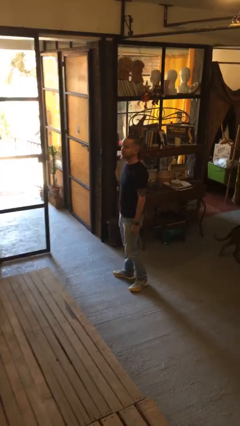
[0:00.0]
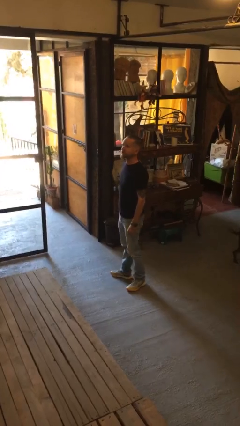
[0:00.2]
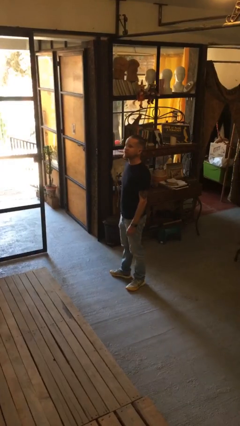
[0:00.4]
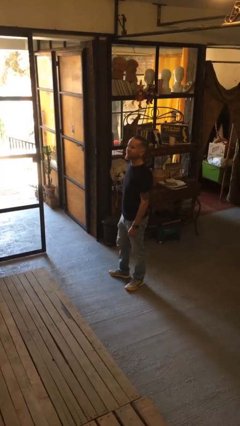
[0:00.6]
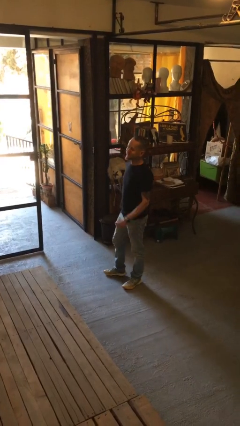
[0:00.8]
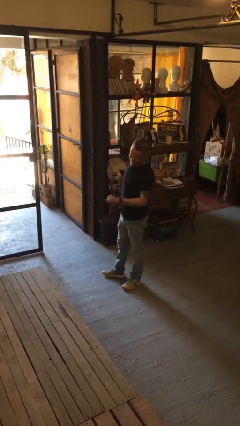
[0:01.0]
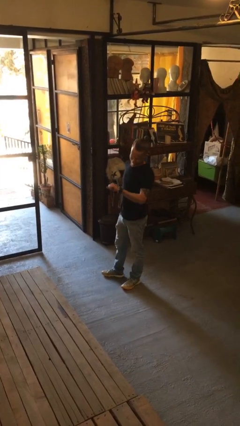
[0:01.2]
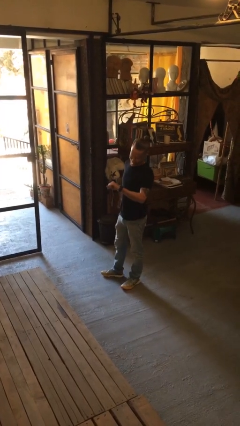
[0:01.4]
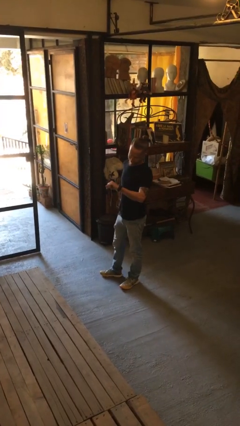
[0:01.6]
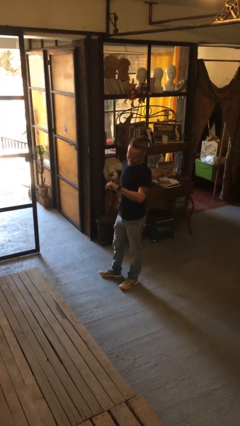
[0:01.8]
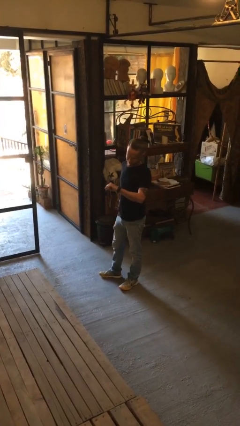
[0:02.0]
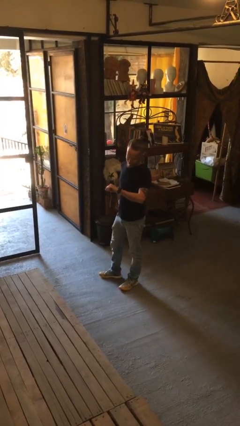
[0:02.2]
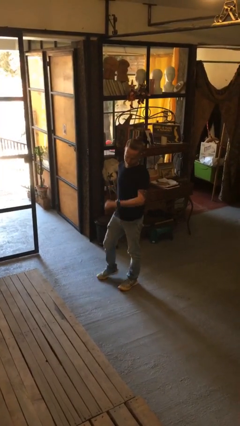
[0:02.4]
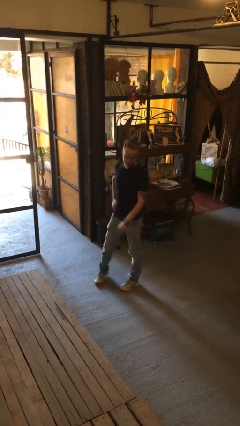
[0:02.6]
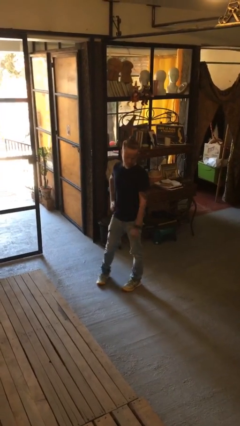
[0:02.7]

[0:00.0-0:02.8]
person looks at wristwatch

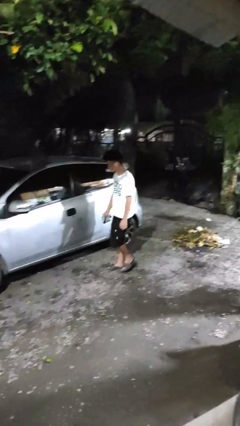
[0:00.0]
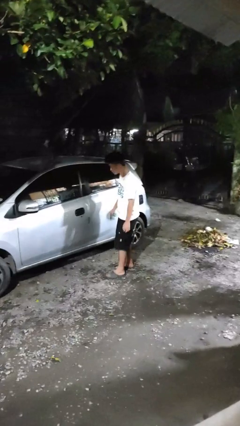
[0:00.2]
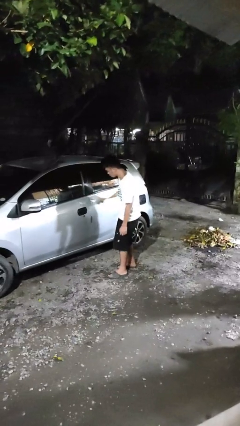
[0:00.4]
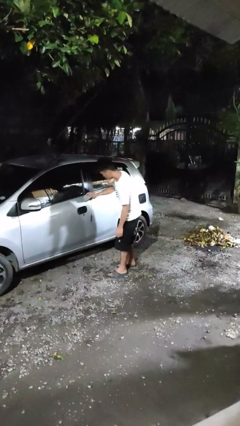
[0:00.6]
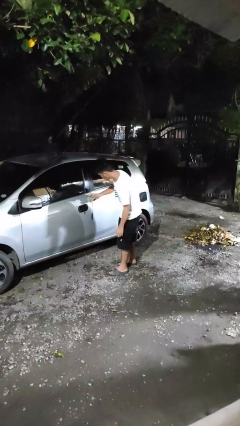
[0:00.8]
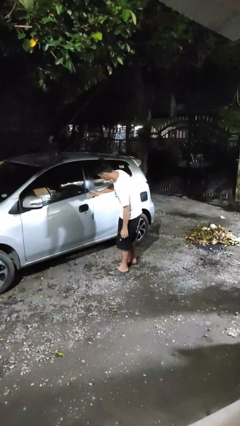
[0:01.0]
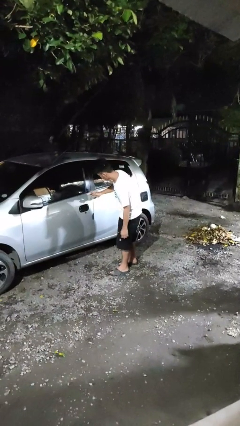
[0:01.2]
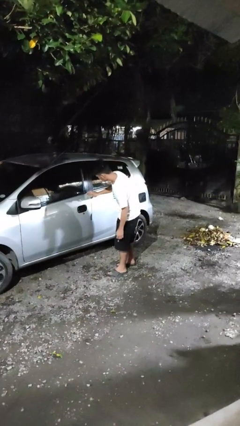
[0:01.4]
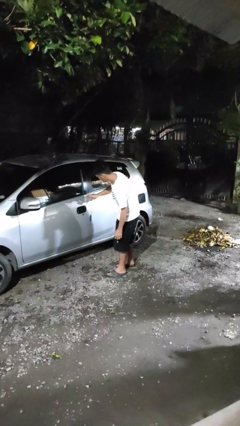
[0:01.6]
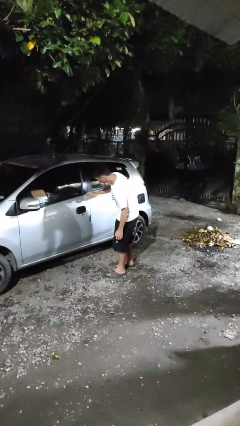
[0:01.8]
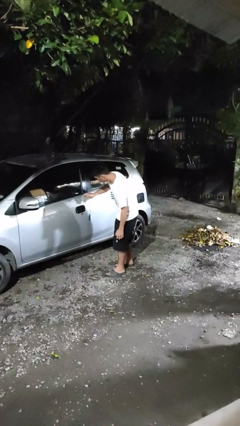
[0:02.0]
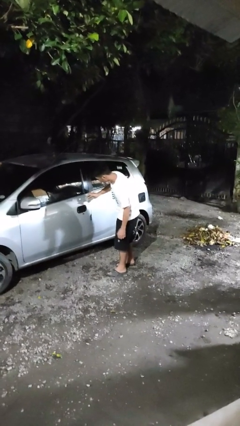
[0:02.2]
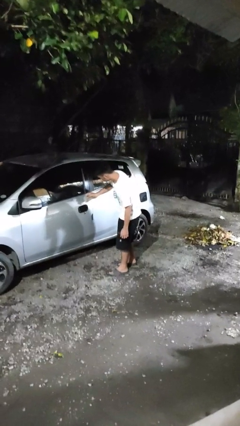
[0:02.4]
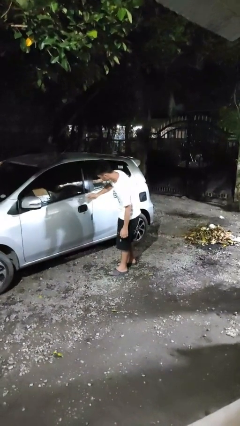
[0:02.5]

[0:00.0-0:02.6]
person polishes car with rag

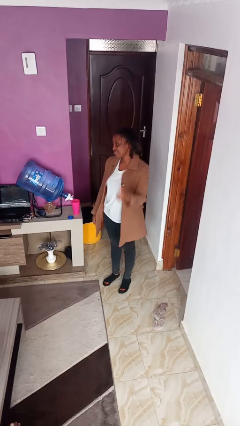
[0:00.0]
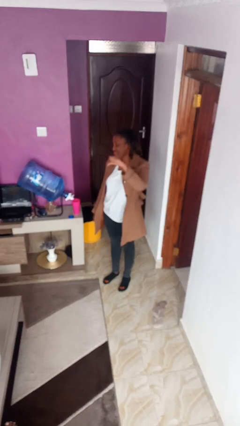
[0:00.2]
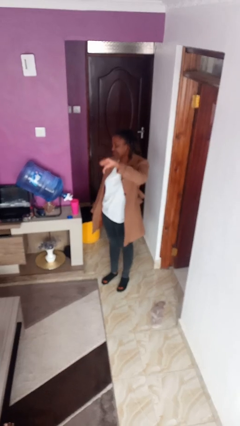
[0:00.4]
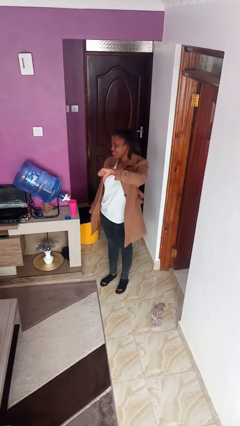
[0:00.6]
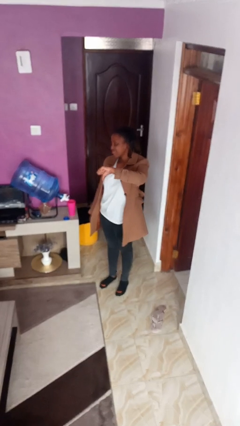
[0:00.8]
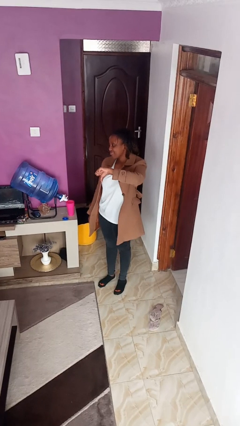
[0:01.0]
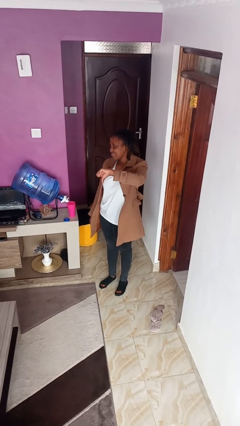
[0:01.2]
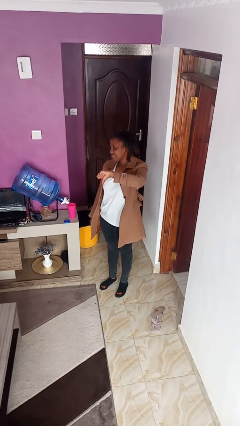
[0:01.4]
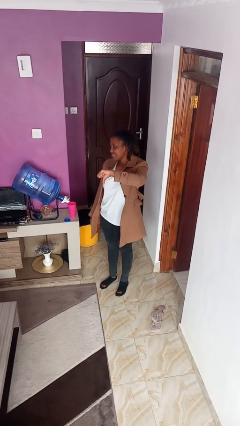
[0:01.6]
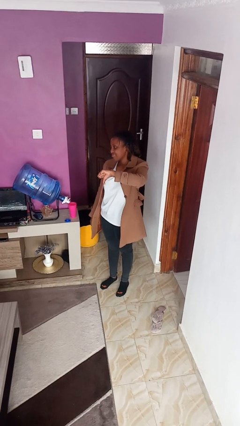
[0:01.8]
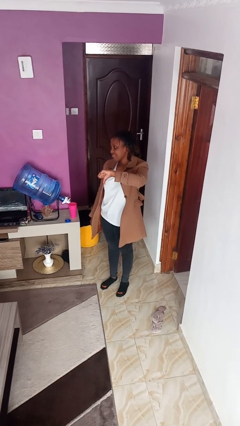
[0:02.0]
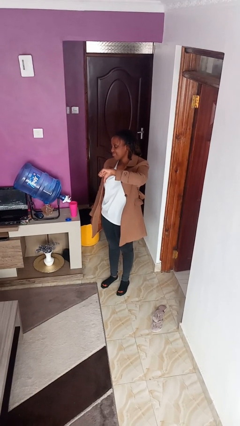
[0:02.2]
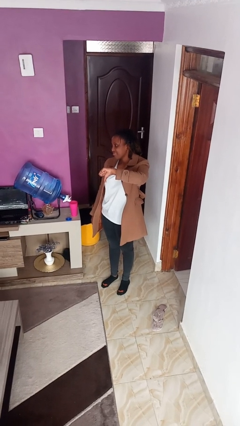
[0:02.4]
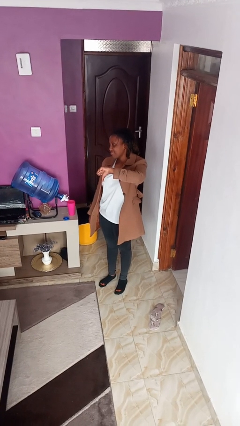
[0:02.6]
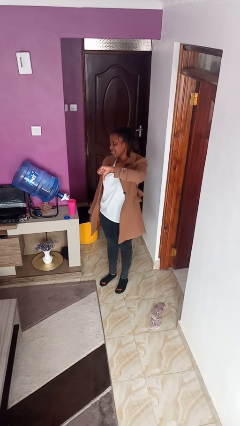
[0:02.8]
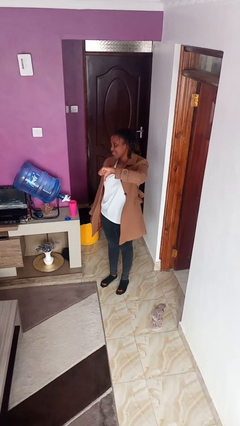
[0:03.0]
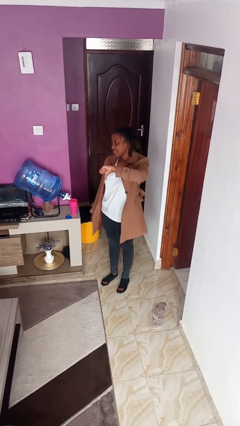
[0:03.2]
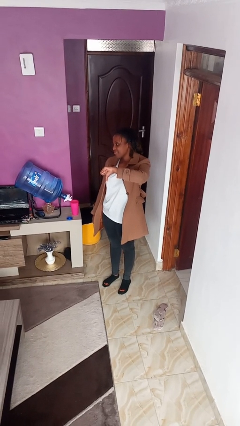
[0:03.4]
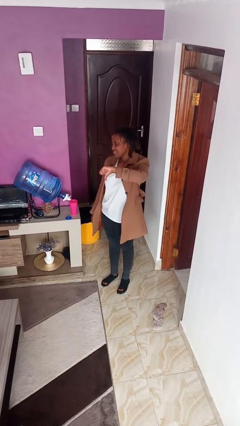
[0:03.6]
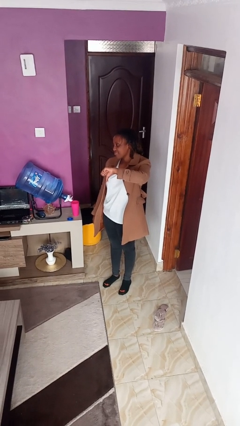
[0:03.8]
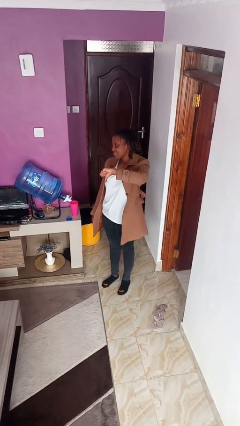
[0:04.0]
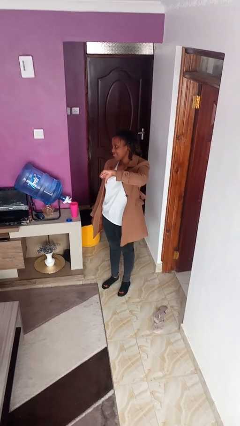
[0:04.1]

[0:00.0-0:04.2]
person gestures thumbs down

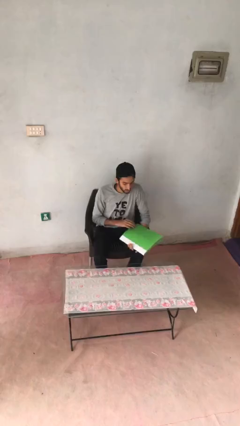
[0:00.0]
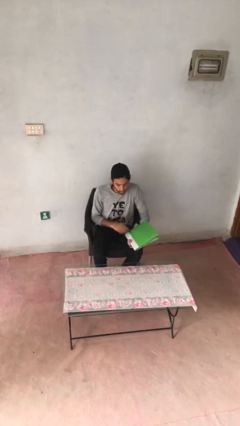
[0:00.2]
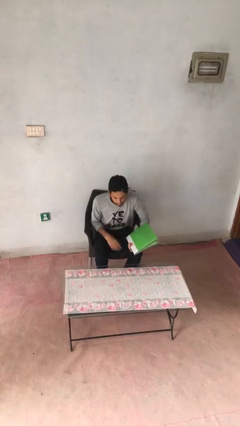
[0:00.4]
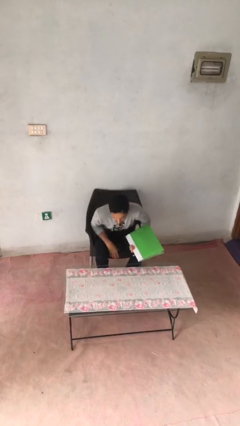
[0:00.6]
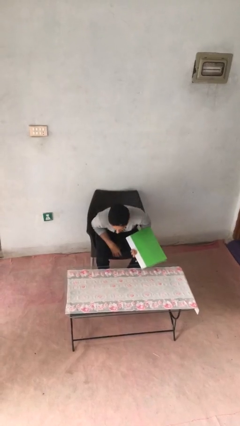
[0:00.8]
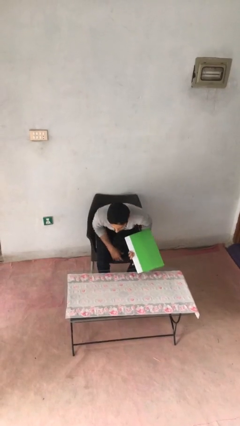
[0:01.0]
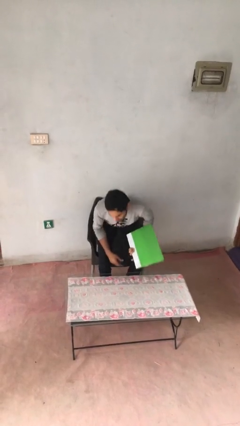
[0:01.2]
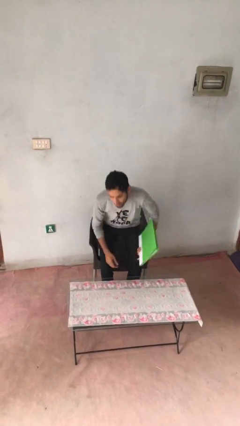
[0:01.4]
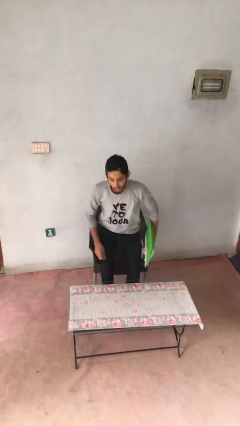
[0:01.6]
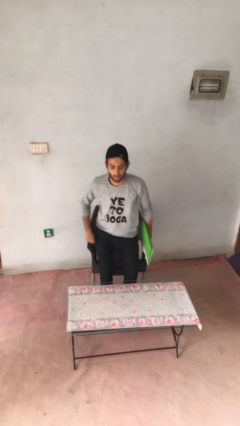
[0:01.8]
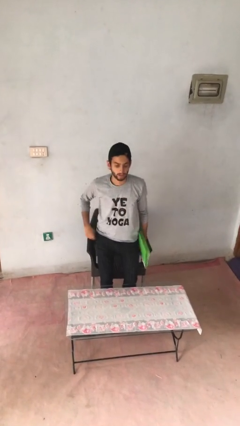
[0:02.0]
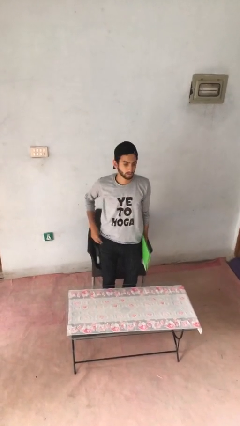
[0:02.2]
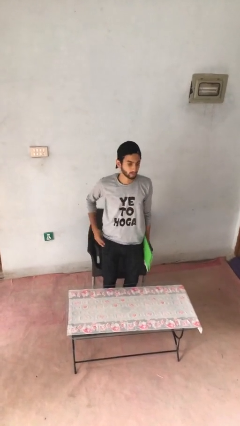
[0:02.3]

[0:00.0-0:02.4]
person stands up

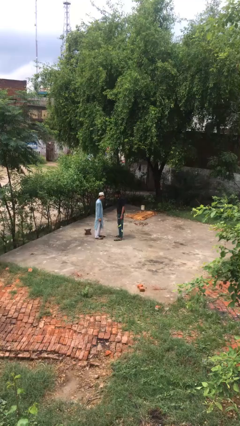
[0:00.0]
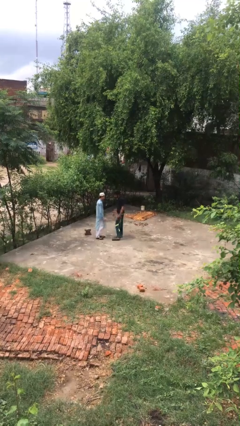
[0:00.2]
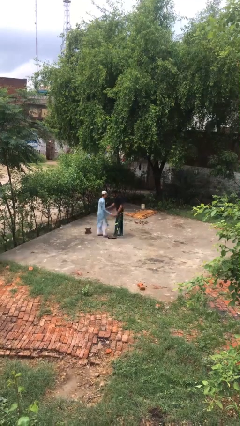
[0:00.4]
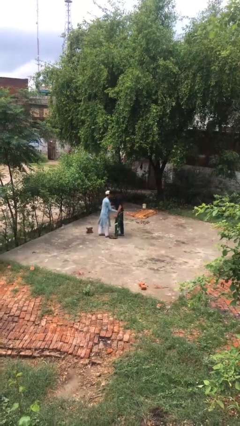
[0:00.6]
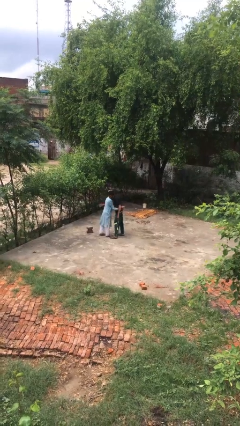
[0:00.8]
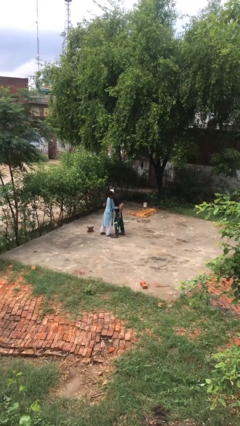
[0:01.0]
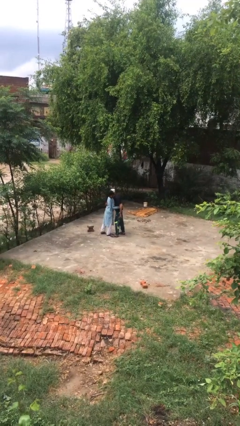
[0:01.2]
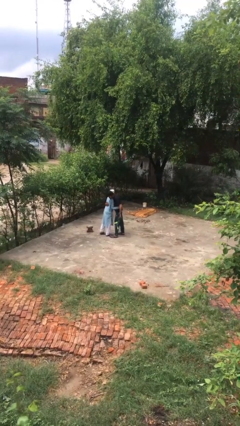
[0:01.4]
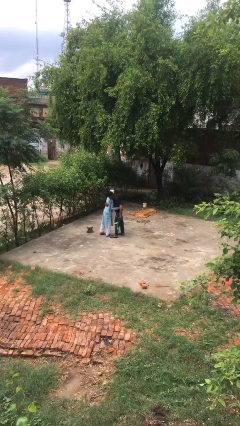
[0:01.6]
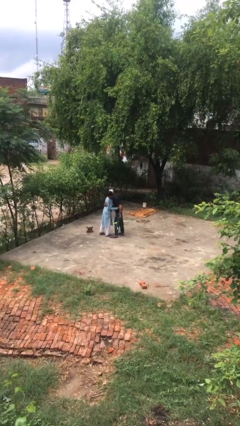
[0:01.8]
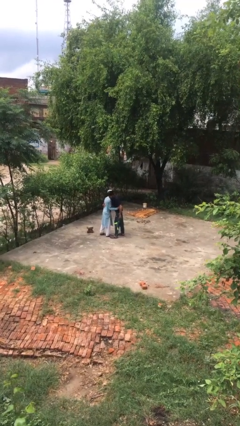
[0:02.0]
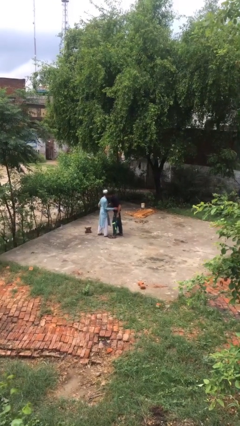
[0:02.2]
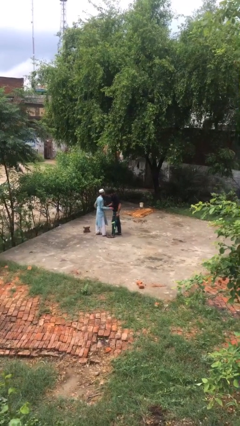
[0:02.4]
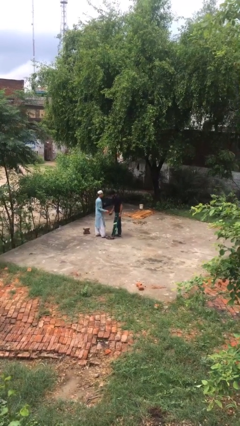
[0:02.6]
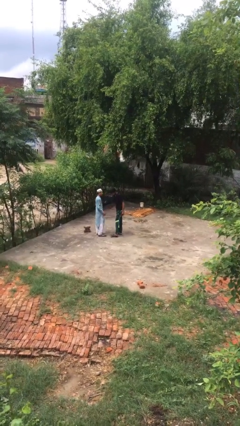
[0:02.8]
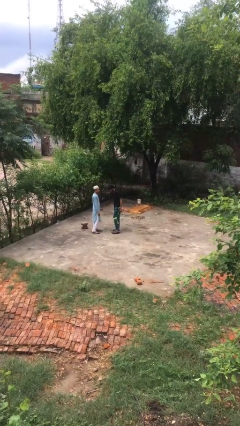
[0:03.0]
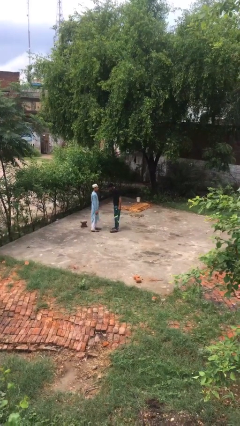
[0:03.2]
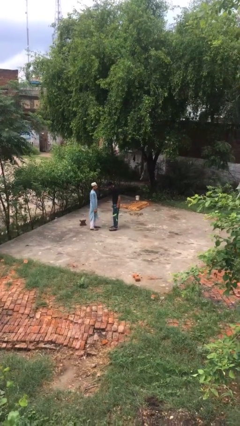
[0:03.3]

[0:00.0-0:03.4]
person embraces person

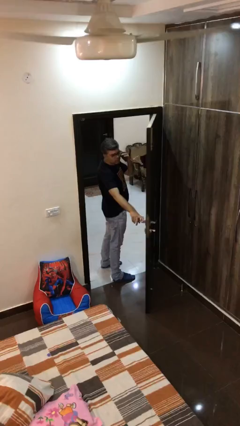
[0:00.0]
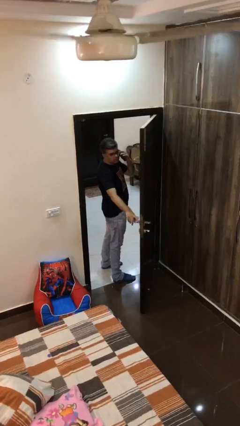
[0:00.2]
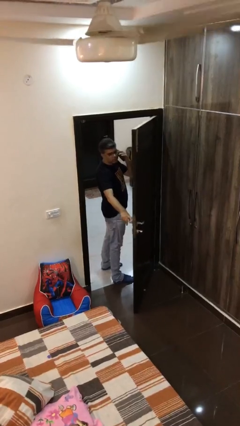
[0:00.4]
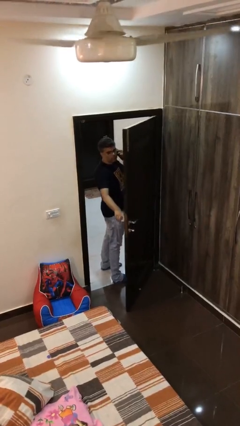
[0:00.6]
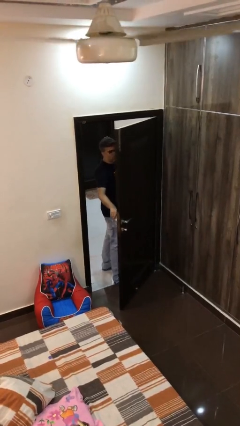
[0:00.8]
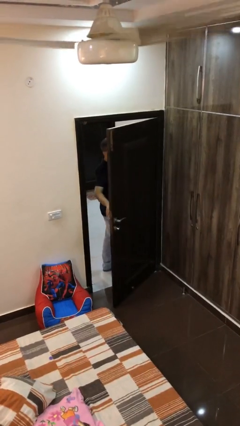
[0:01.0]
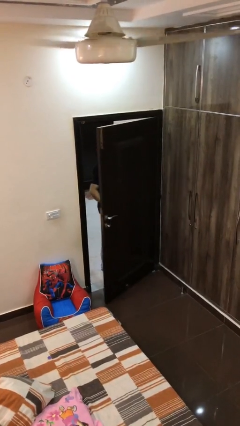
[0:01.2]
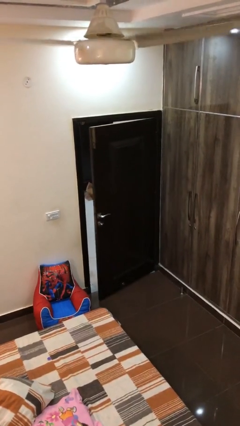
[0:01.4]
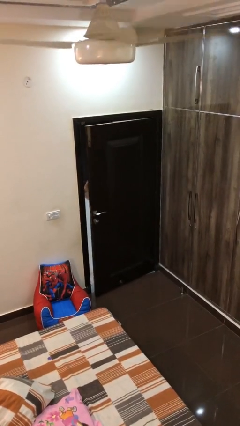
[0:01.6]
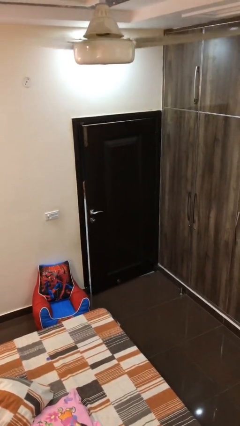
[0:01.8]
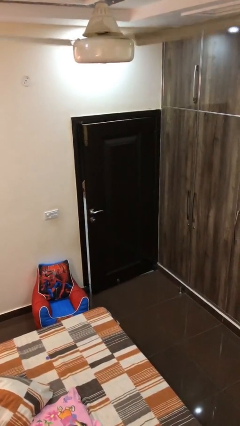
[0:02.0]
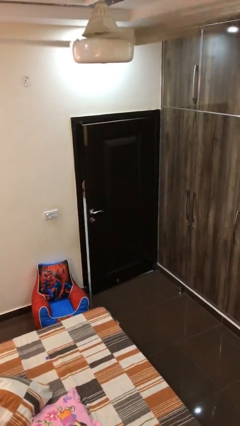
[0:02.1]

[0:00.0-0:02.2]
person closes facility door
